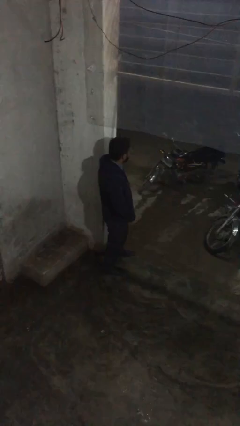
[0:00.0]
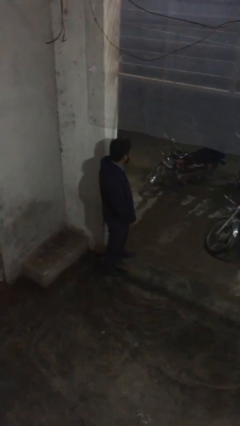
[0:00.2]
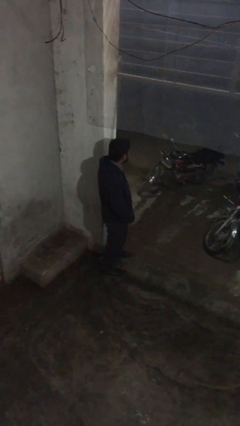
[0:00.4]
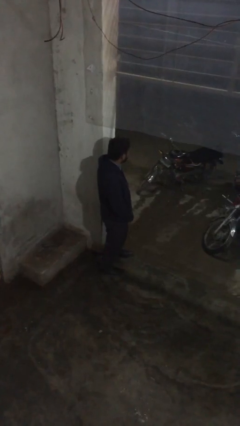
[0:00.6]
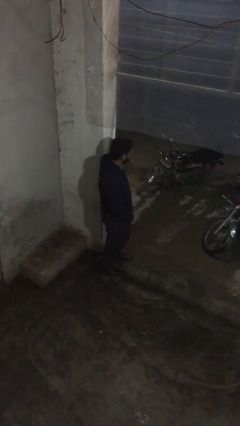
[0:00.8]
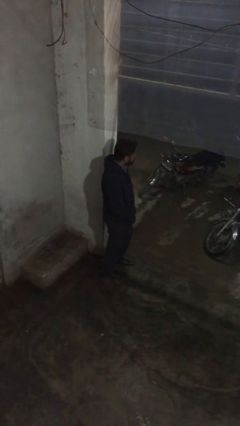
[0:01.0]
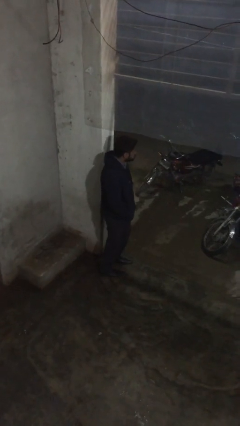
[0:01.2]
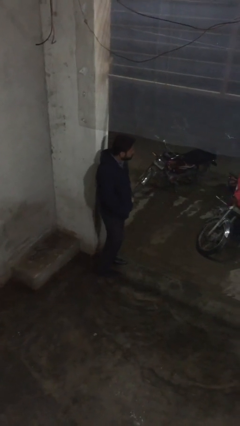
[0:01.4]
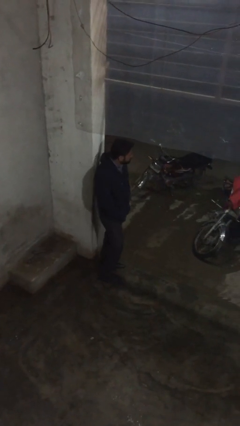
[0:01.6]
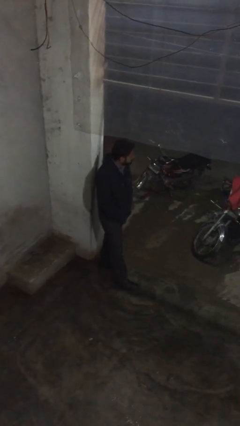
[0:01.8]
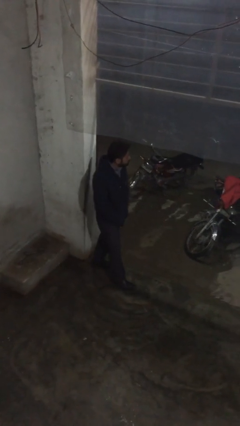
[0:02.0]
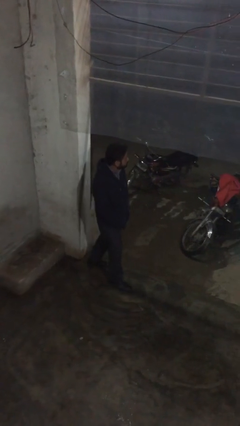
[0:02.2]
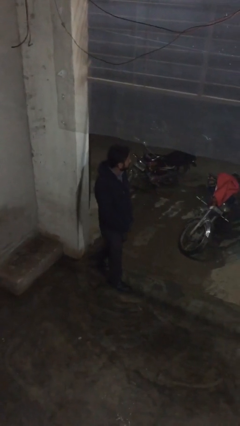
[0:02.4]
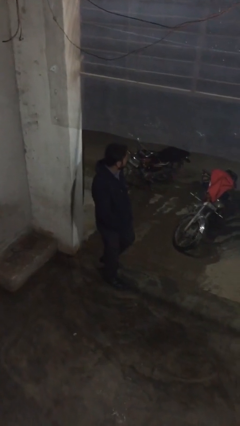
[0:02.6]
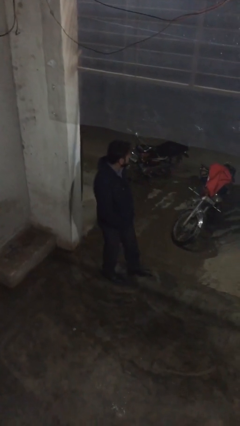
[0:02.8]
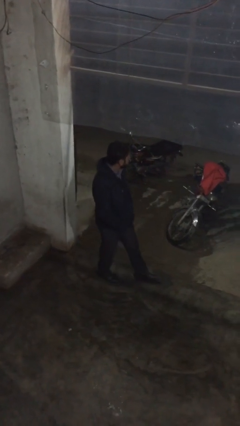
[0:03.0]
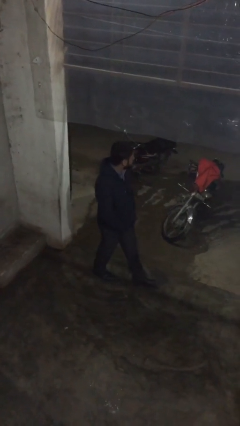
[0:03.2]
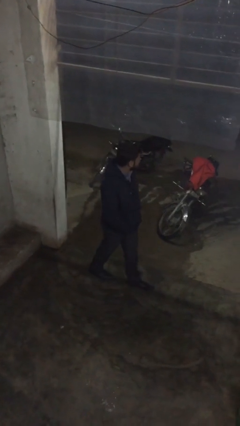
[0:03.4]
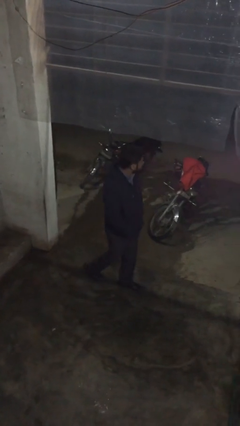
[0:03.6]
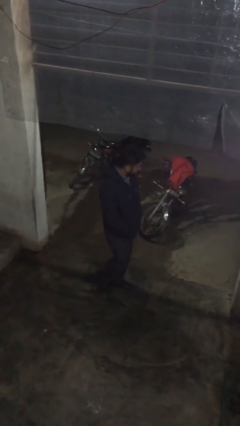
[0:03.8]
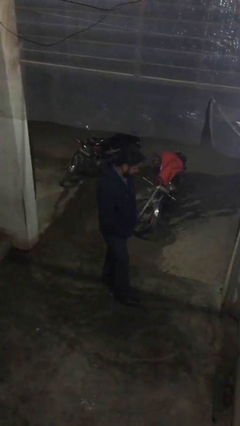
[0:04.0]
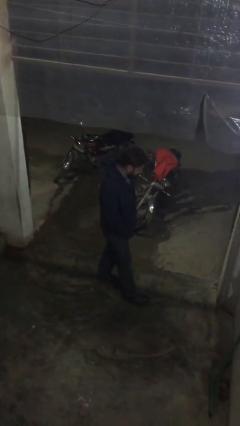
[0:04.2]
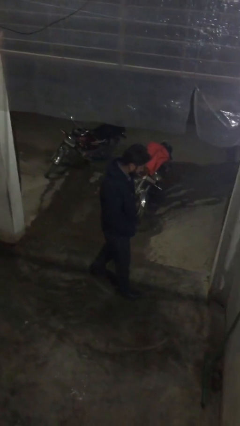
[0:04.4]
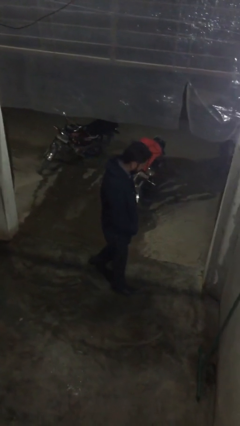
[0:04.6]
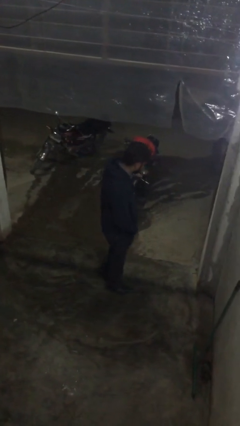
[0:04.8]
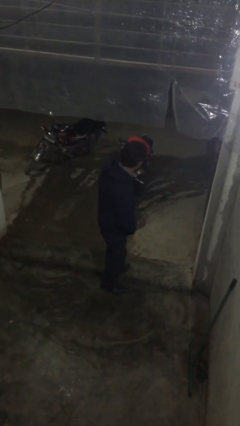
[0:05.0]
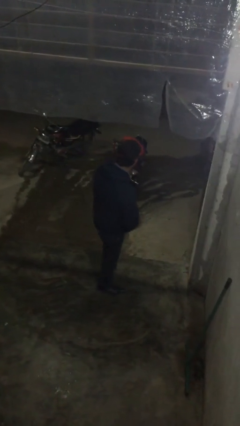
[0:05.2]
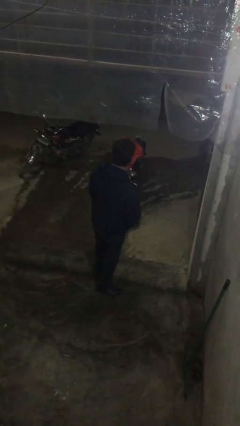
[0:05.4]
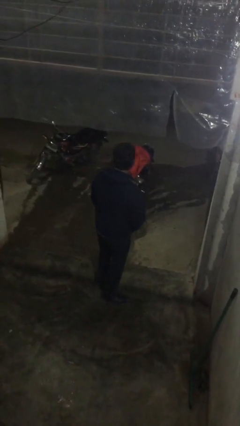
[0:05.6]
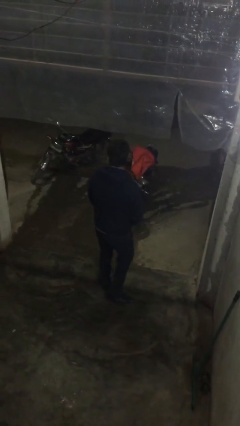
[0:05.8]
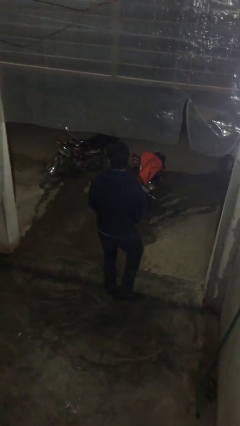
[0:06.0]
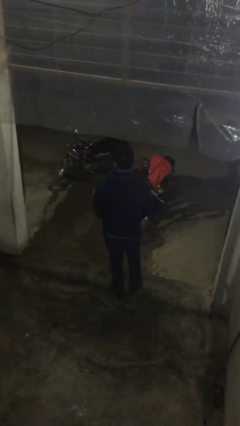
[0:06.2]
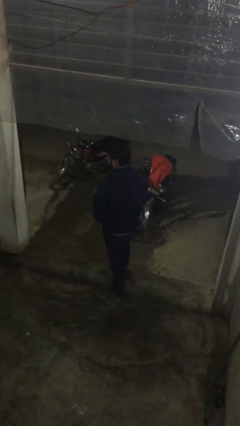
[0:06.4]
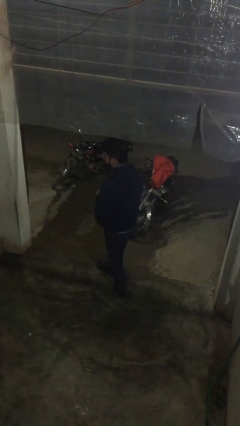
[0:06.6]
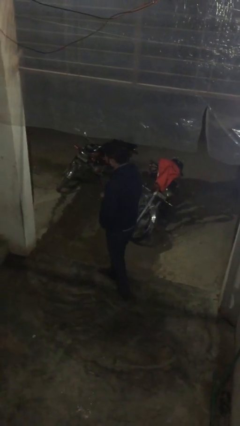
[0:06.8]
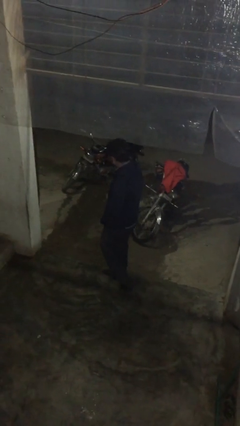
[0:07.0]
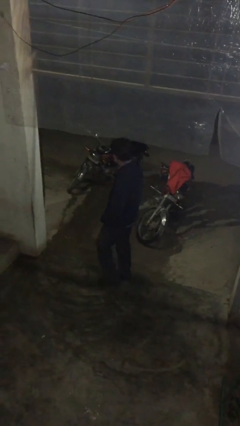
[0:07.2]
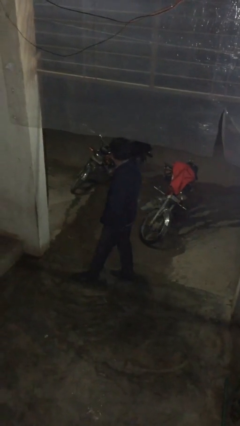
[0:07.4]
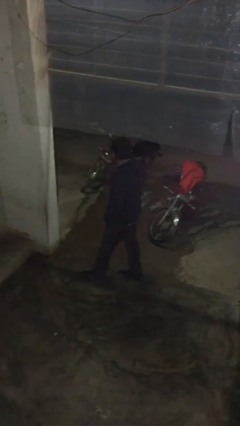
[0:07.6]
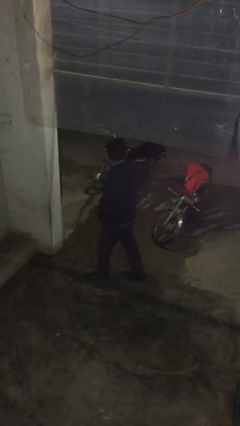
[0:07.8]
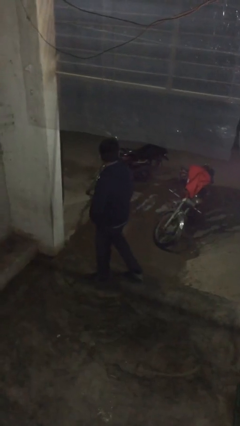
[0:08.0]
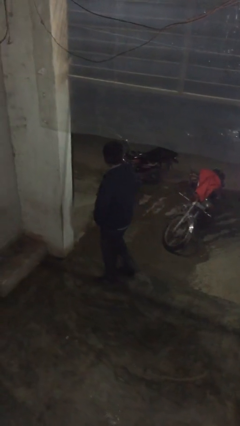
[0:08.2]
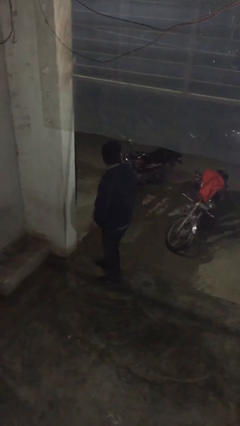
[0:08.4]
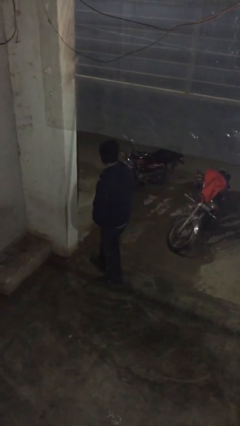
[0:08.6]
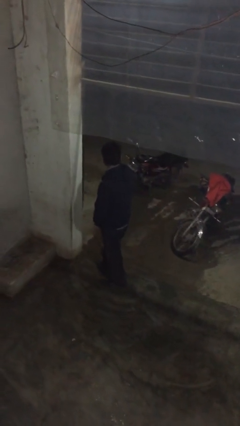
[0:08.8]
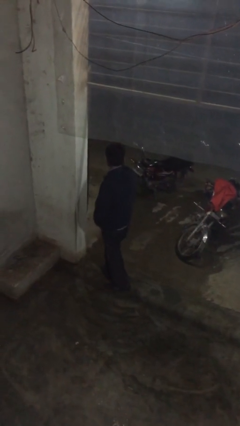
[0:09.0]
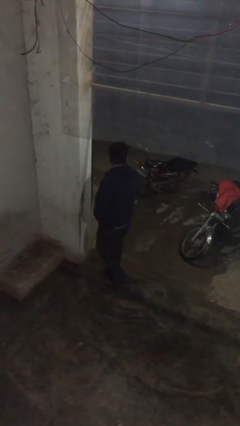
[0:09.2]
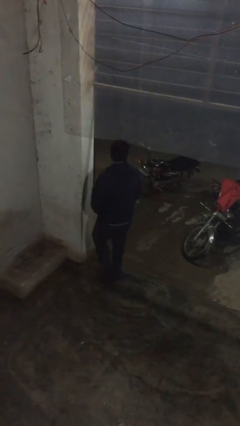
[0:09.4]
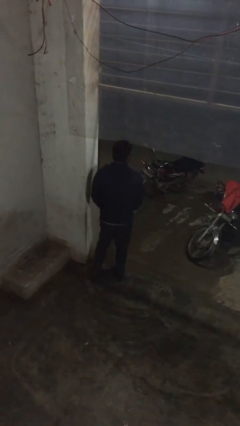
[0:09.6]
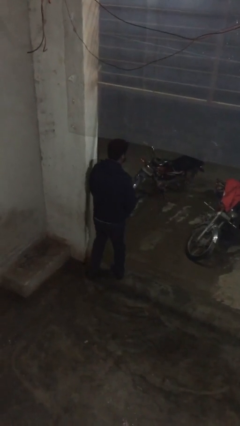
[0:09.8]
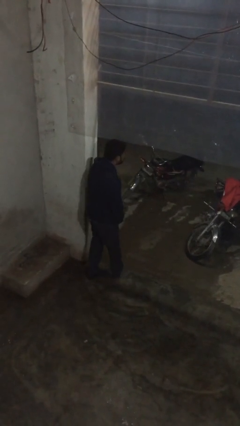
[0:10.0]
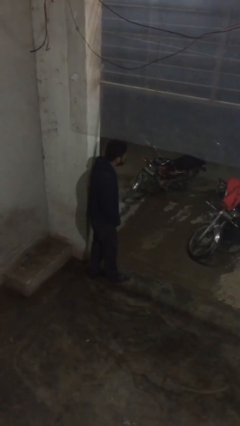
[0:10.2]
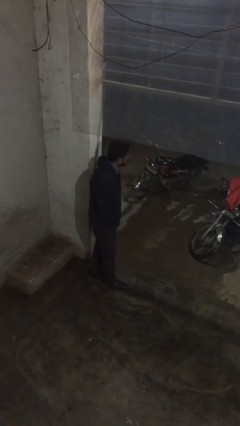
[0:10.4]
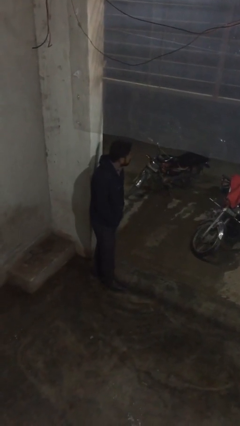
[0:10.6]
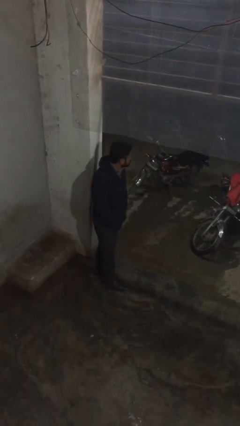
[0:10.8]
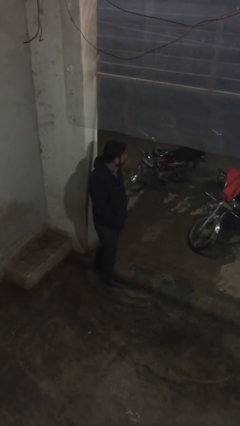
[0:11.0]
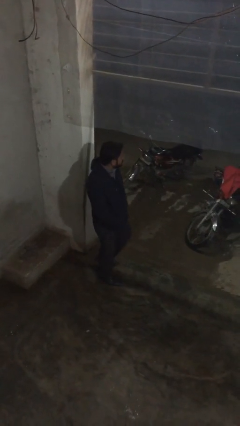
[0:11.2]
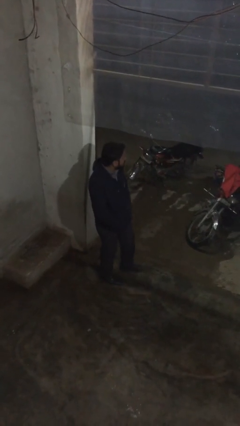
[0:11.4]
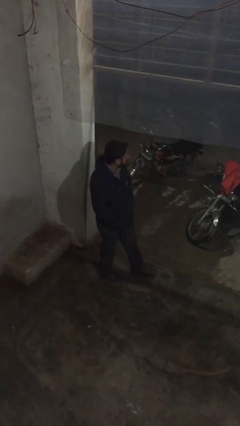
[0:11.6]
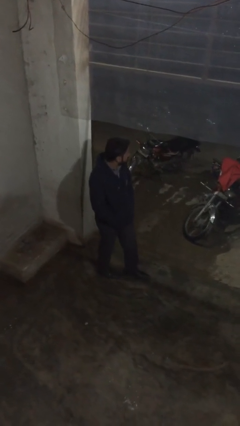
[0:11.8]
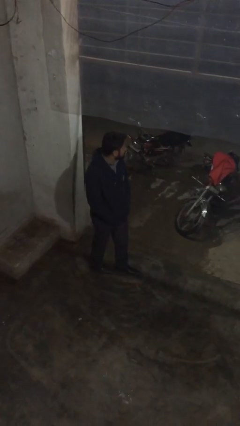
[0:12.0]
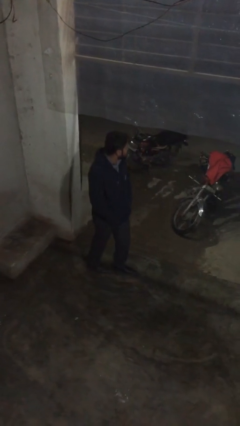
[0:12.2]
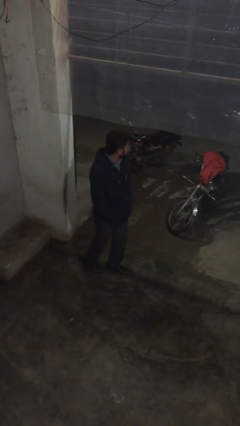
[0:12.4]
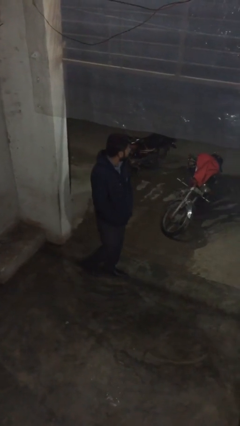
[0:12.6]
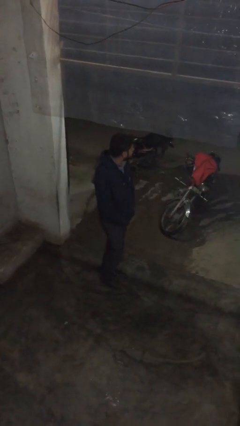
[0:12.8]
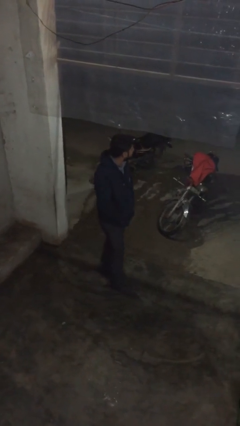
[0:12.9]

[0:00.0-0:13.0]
person walks

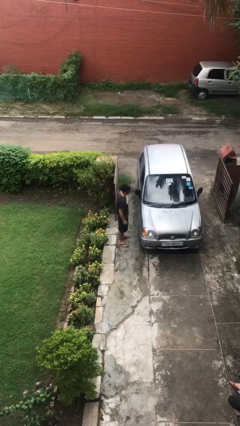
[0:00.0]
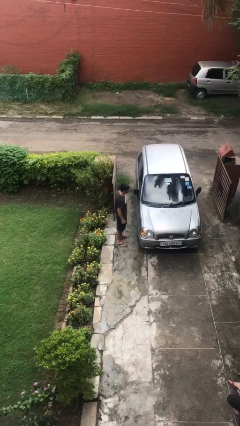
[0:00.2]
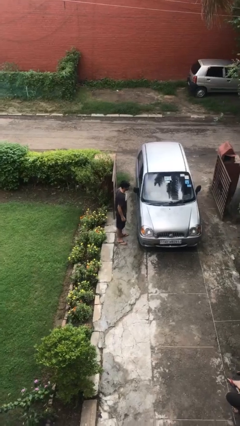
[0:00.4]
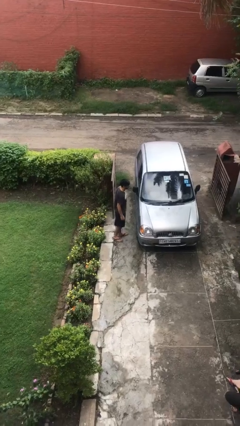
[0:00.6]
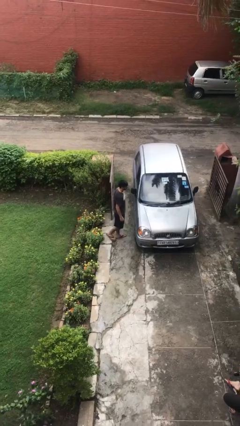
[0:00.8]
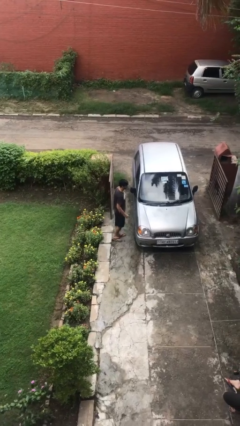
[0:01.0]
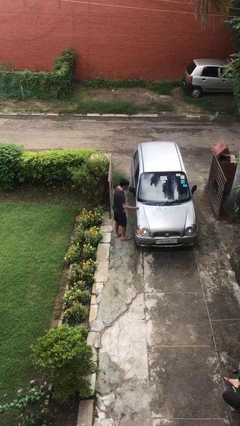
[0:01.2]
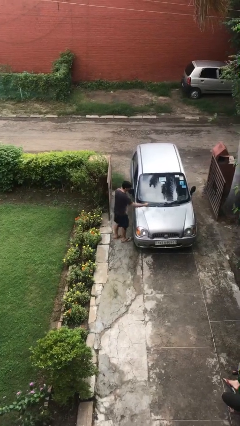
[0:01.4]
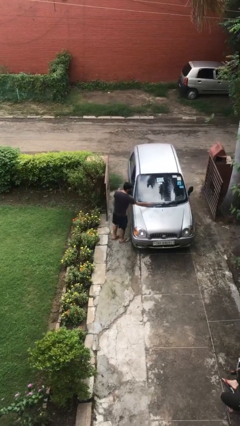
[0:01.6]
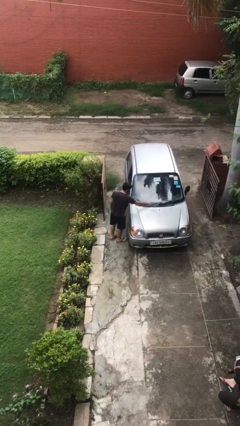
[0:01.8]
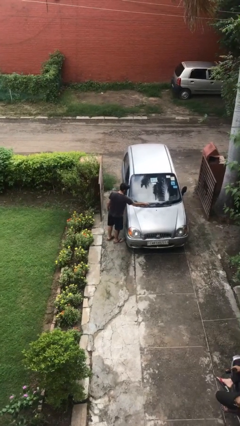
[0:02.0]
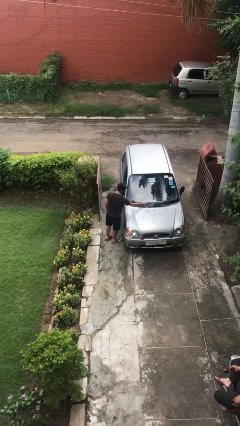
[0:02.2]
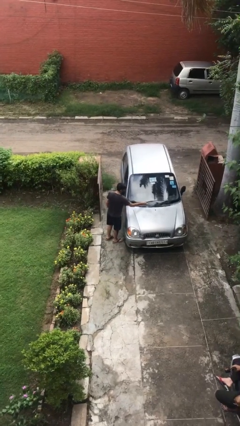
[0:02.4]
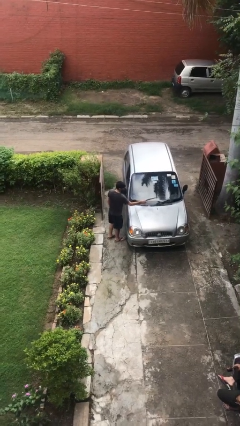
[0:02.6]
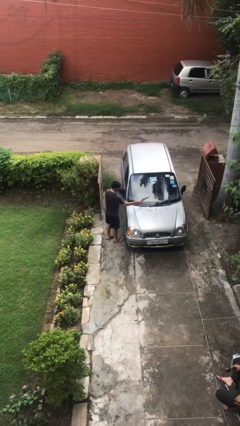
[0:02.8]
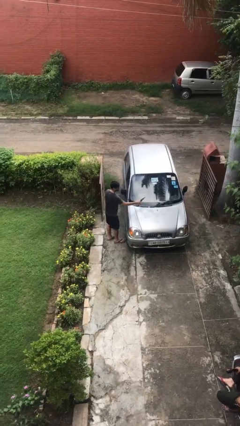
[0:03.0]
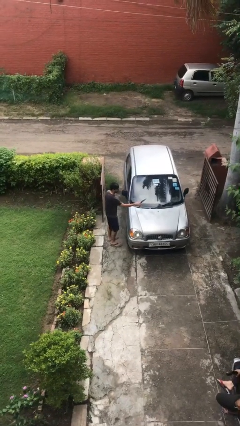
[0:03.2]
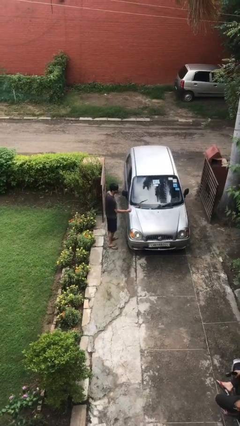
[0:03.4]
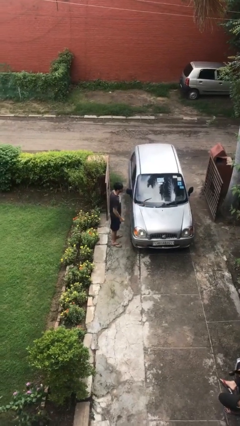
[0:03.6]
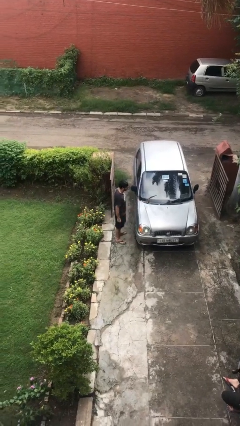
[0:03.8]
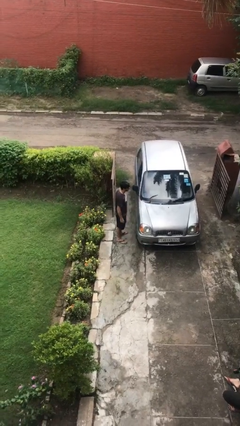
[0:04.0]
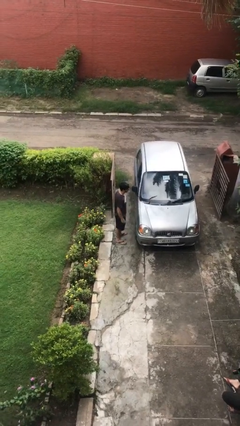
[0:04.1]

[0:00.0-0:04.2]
person flips up car wipers

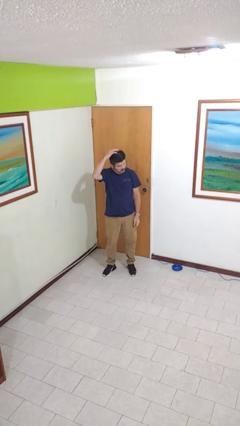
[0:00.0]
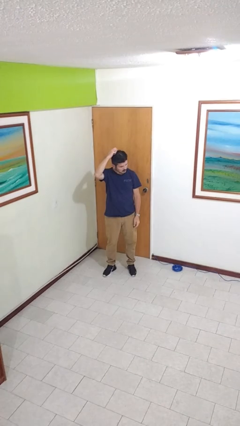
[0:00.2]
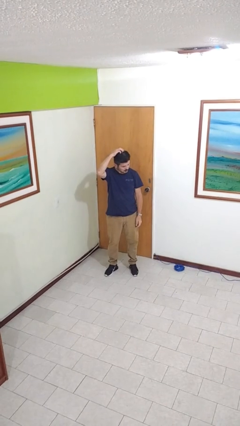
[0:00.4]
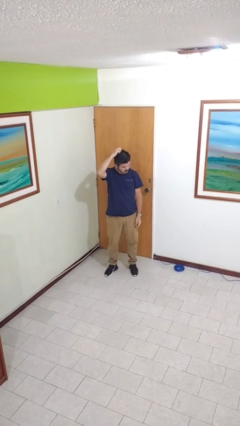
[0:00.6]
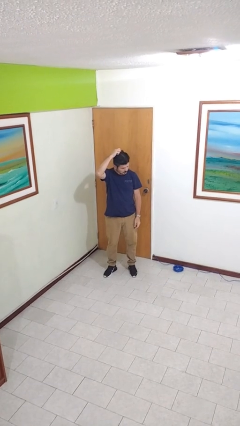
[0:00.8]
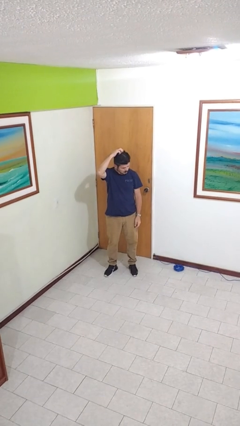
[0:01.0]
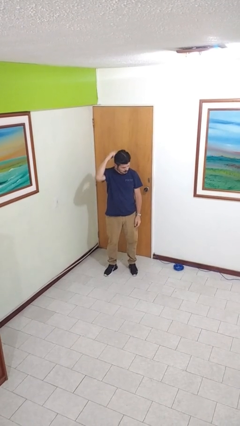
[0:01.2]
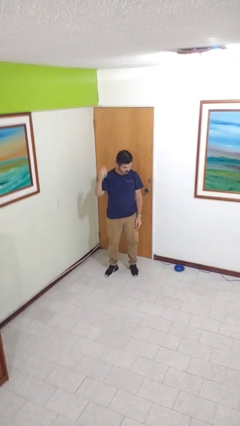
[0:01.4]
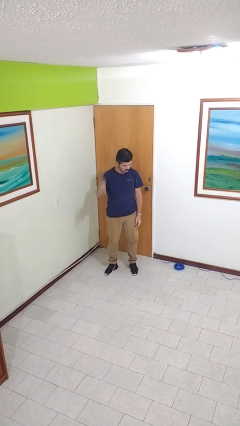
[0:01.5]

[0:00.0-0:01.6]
person scratches face
